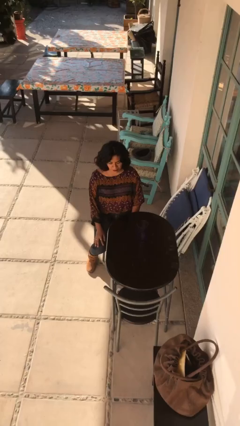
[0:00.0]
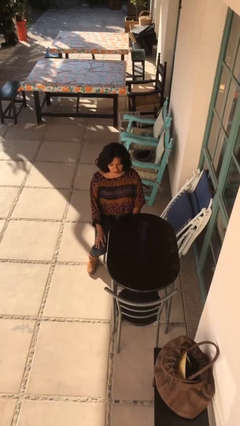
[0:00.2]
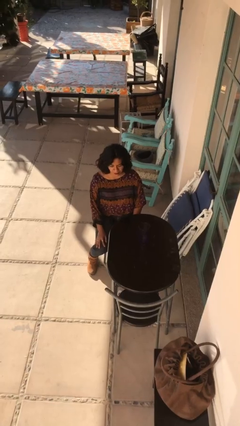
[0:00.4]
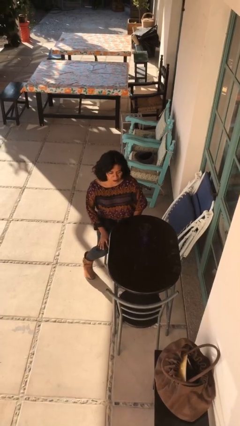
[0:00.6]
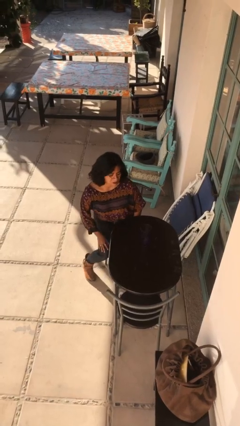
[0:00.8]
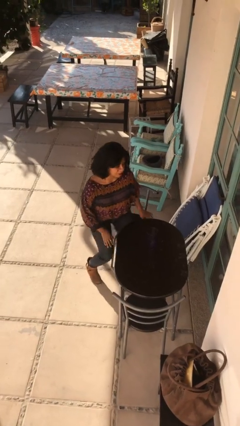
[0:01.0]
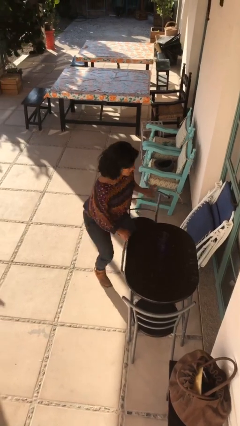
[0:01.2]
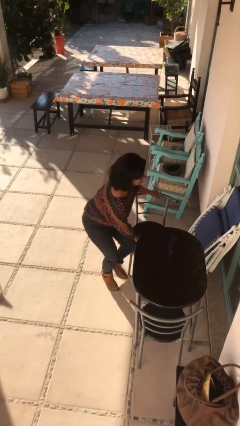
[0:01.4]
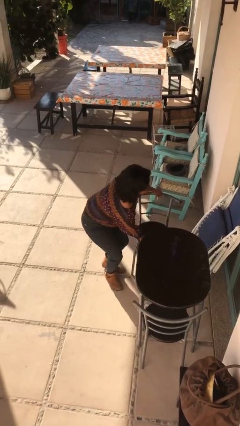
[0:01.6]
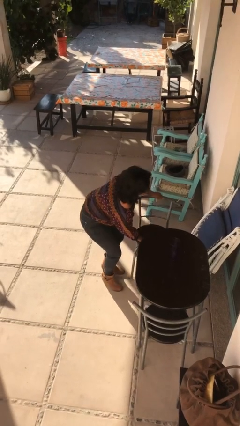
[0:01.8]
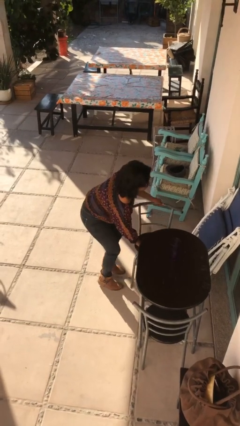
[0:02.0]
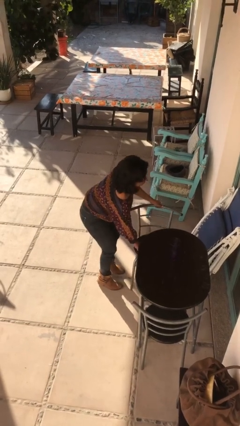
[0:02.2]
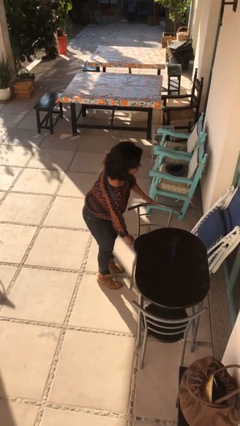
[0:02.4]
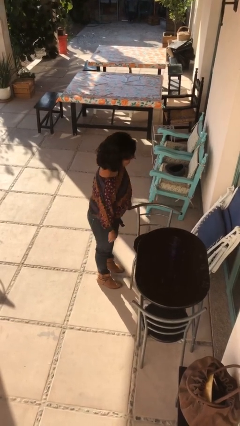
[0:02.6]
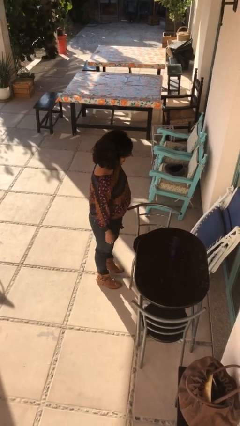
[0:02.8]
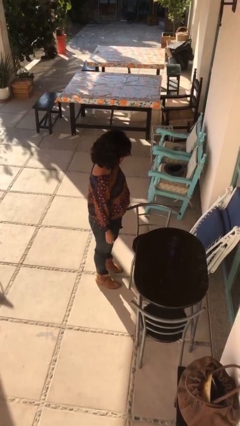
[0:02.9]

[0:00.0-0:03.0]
person stands up

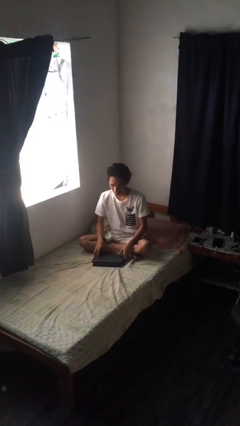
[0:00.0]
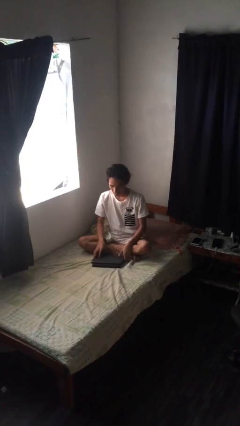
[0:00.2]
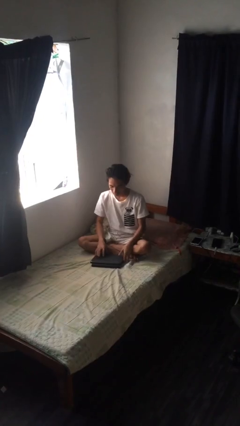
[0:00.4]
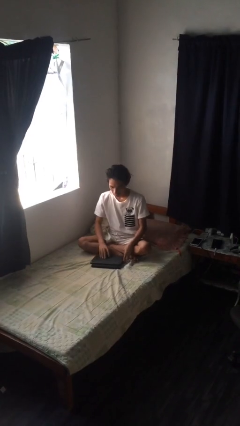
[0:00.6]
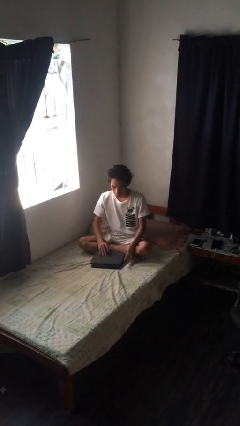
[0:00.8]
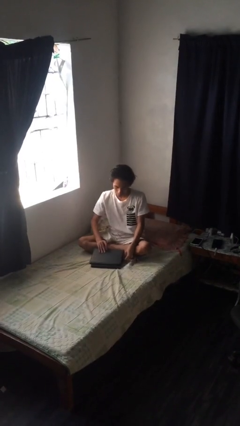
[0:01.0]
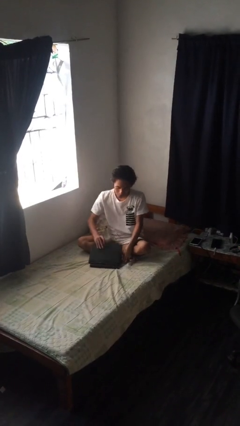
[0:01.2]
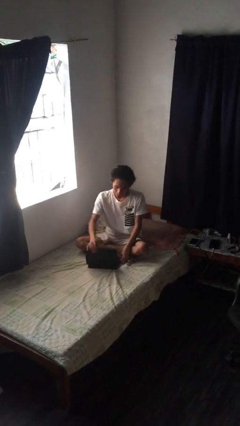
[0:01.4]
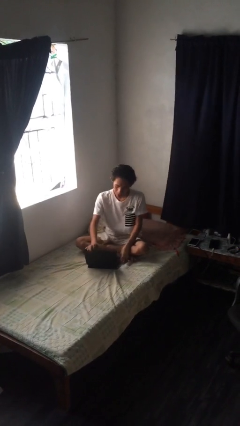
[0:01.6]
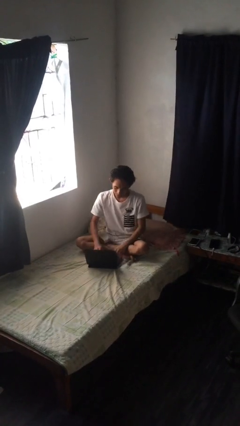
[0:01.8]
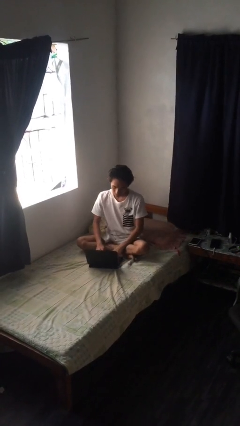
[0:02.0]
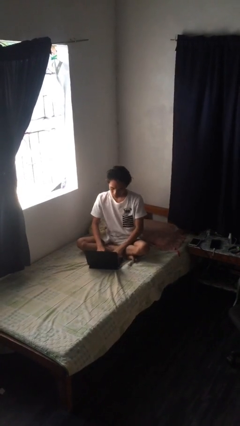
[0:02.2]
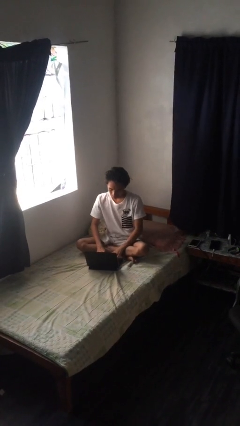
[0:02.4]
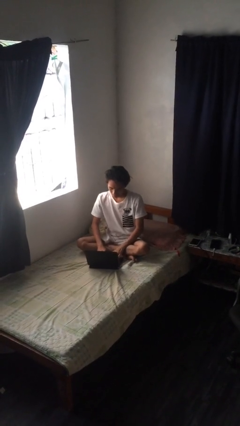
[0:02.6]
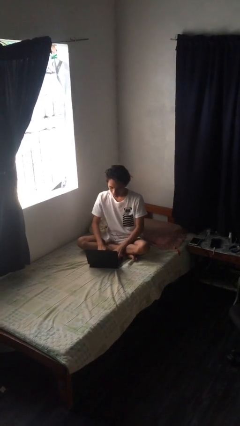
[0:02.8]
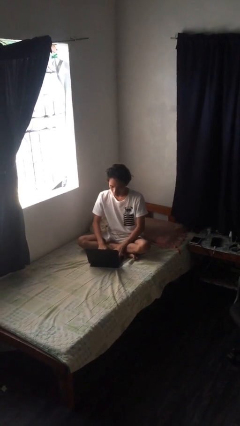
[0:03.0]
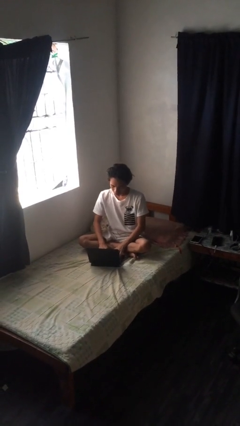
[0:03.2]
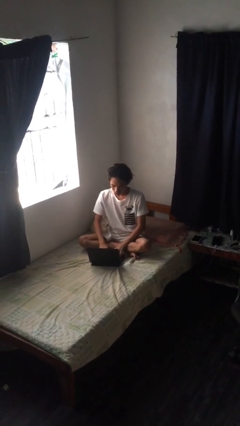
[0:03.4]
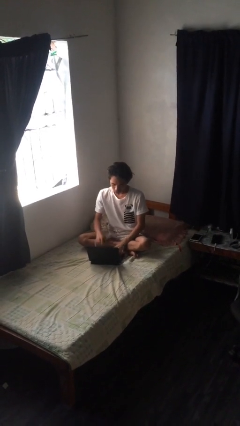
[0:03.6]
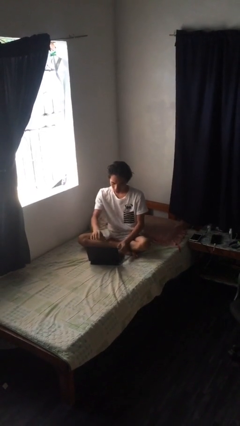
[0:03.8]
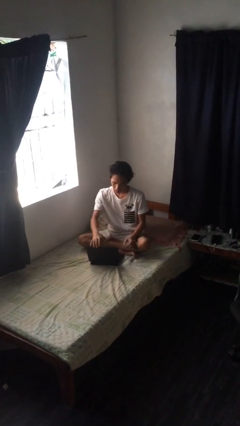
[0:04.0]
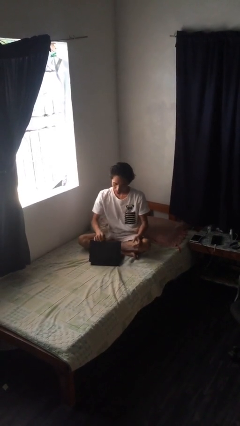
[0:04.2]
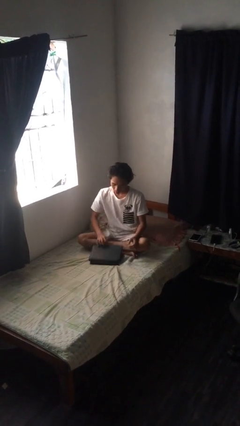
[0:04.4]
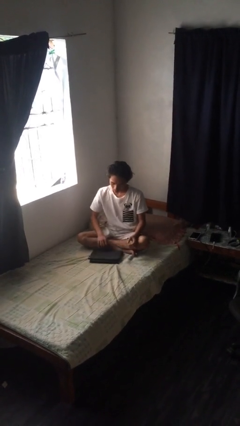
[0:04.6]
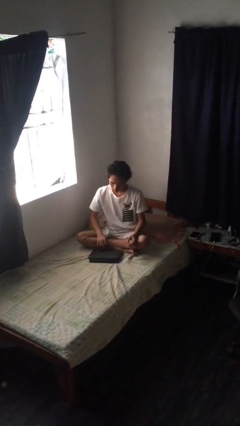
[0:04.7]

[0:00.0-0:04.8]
person interacts with laptop

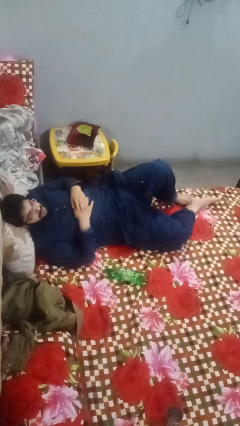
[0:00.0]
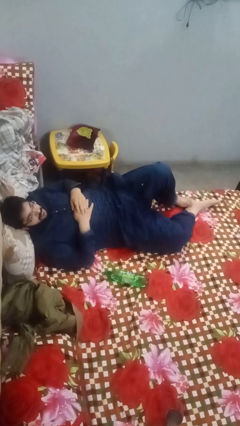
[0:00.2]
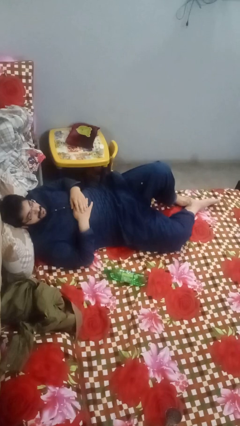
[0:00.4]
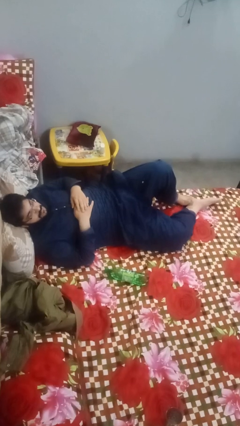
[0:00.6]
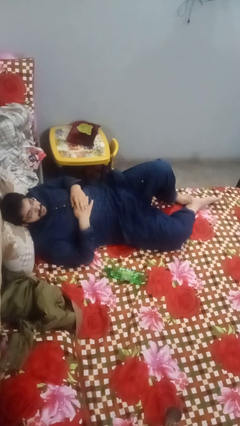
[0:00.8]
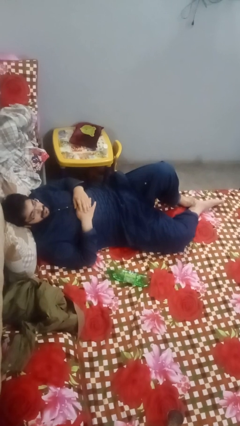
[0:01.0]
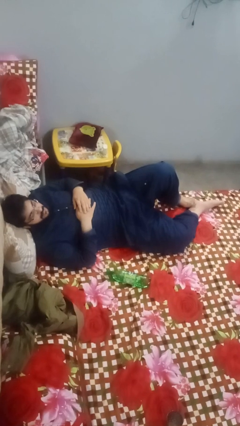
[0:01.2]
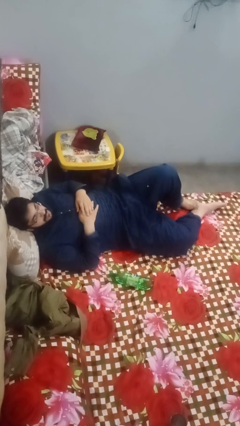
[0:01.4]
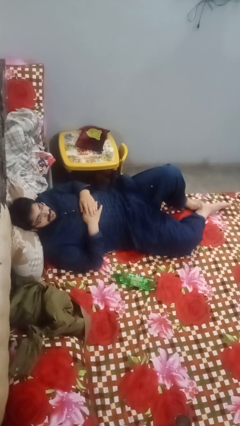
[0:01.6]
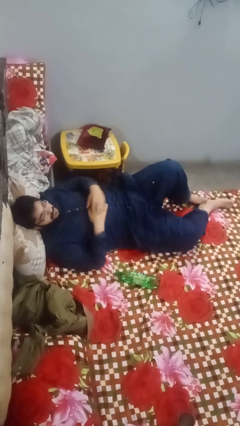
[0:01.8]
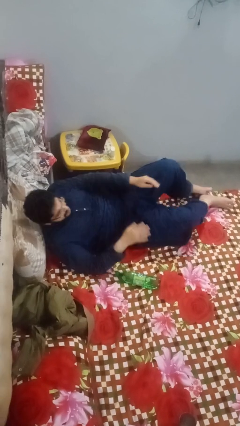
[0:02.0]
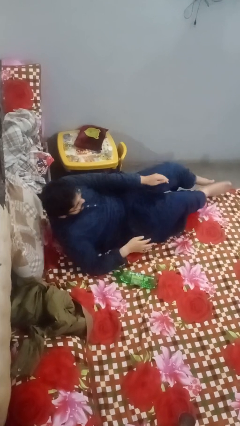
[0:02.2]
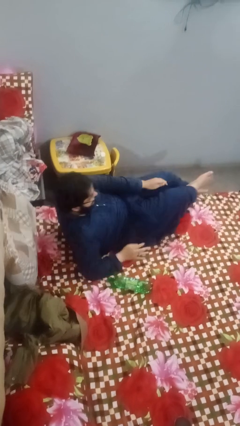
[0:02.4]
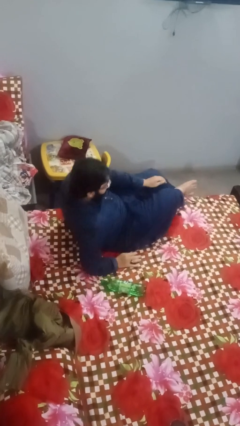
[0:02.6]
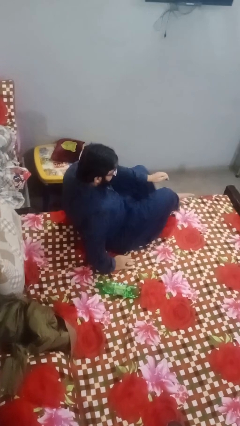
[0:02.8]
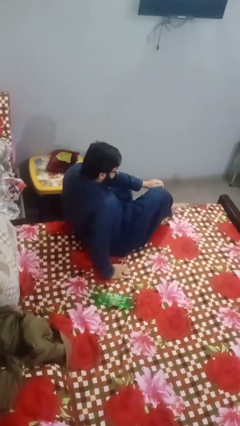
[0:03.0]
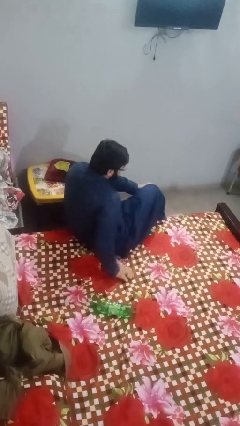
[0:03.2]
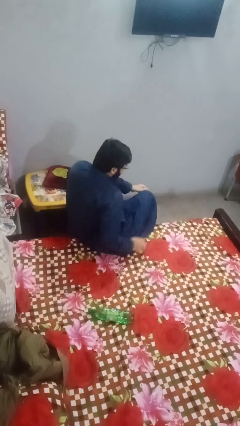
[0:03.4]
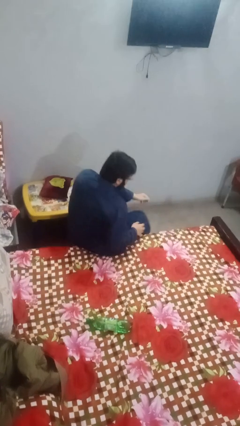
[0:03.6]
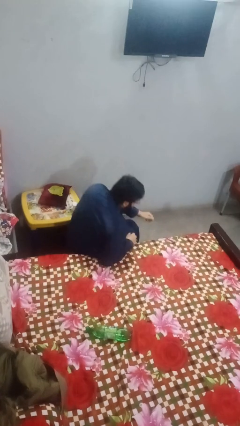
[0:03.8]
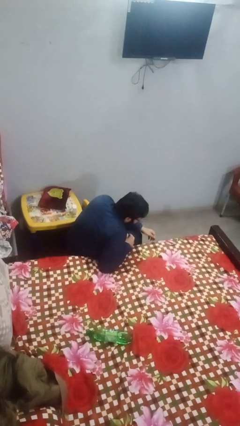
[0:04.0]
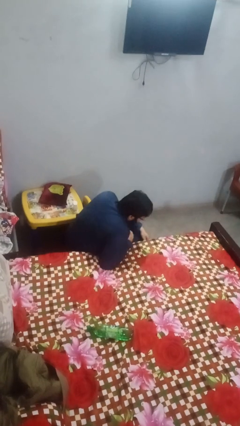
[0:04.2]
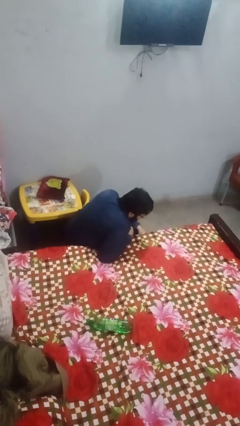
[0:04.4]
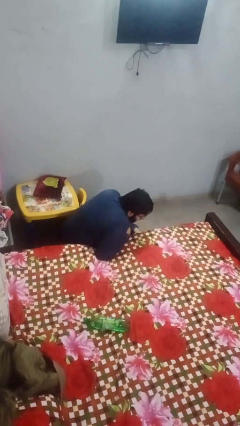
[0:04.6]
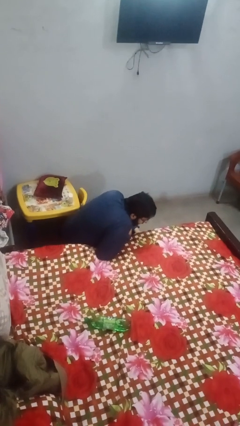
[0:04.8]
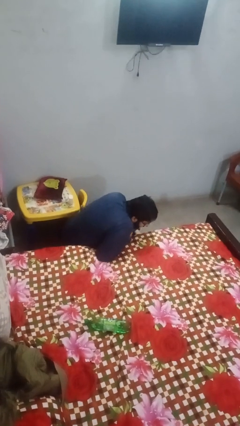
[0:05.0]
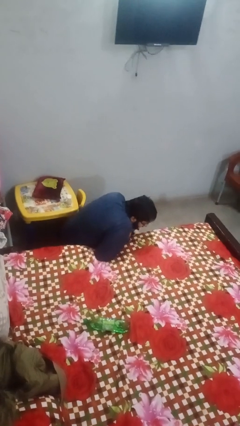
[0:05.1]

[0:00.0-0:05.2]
person falls from bed

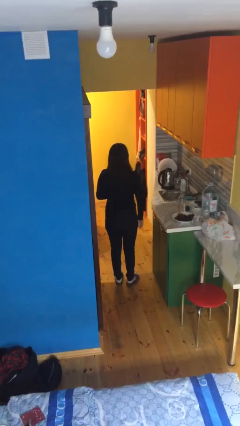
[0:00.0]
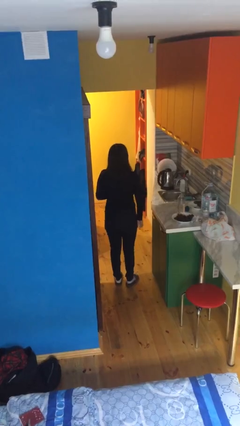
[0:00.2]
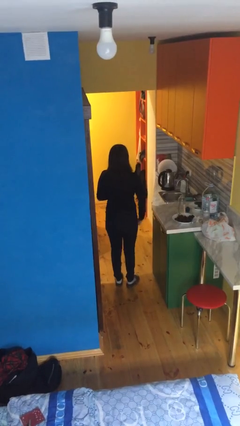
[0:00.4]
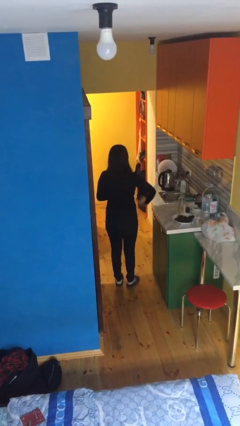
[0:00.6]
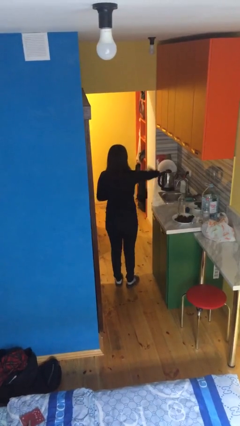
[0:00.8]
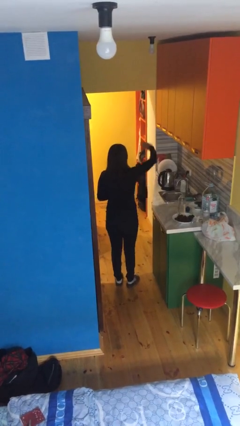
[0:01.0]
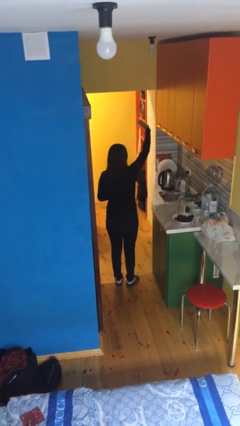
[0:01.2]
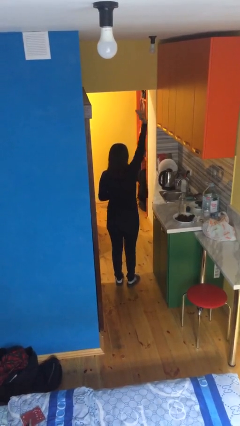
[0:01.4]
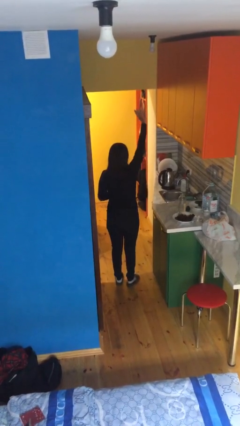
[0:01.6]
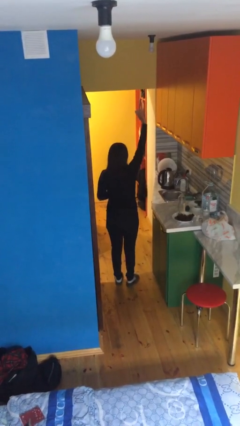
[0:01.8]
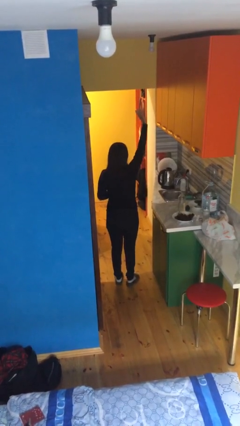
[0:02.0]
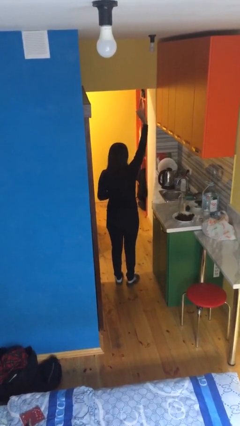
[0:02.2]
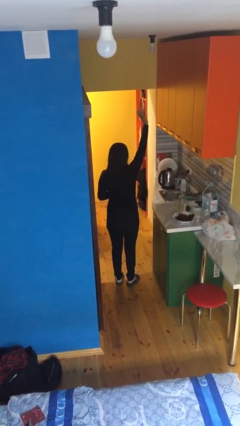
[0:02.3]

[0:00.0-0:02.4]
person gestures swipe up

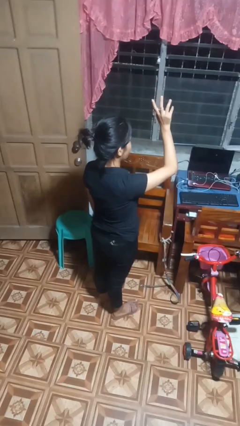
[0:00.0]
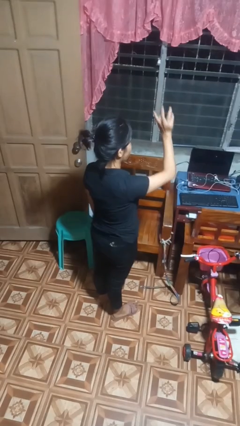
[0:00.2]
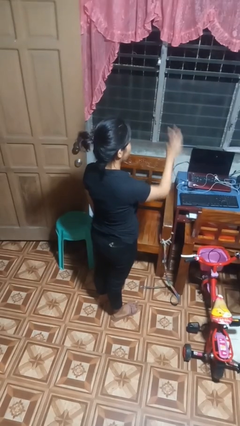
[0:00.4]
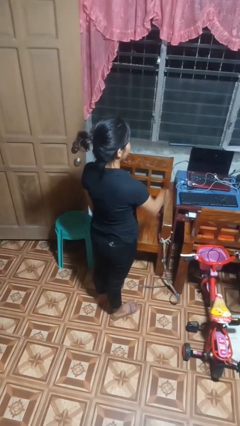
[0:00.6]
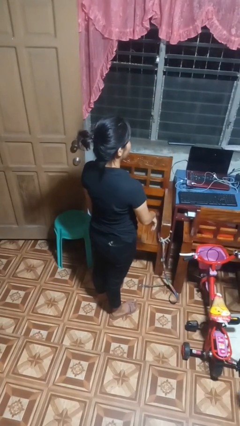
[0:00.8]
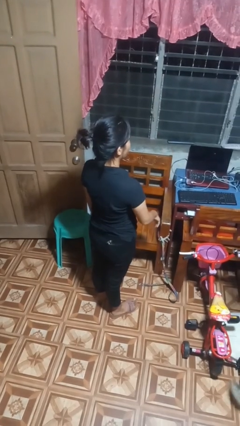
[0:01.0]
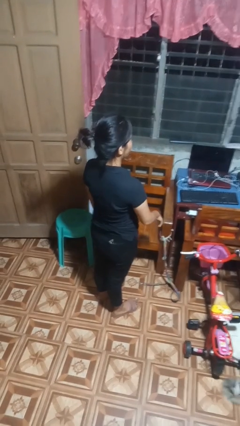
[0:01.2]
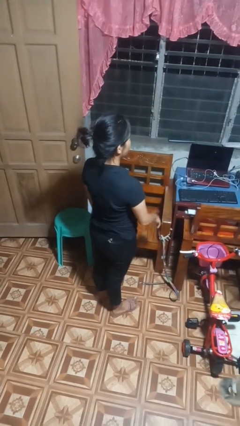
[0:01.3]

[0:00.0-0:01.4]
person gestures swipe down

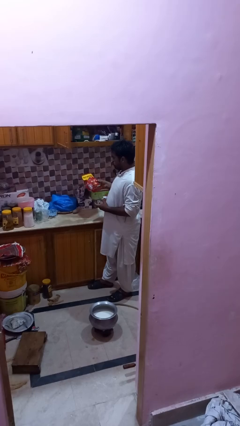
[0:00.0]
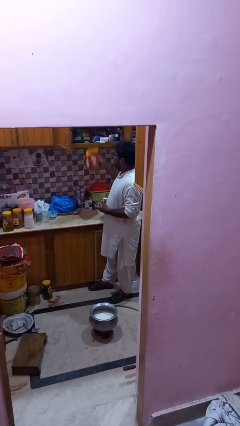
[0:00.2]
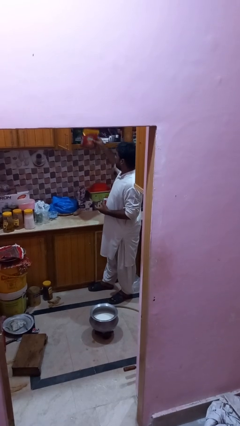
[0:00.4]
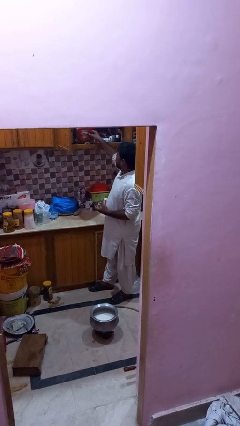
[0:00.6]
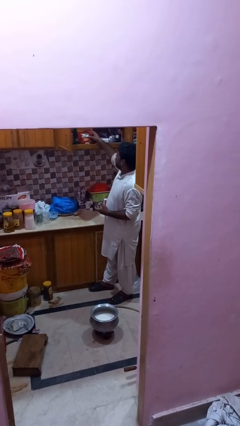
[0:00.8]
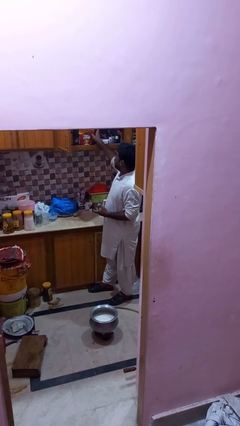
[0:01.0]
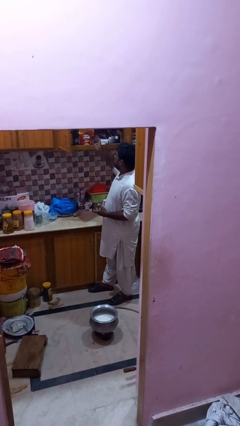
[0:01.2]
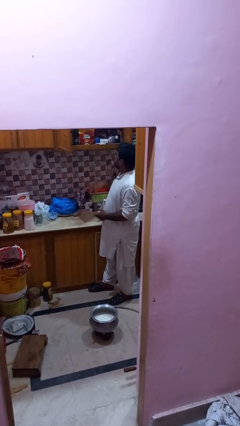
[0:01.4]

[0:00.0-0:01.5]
person puts down object into cabinet
